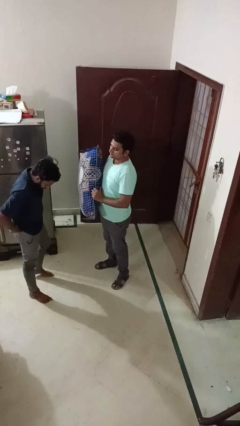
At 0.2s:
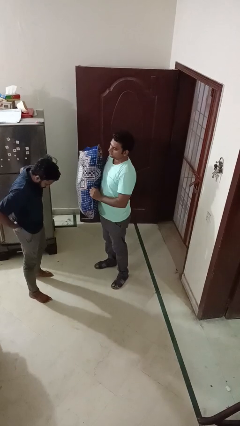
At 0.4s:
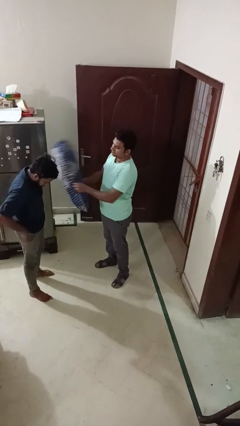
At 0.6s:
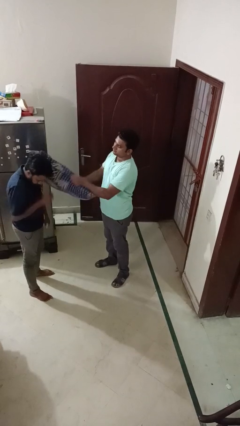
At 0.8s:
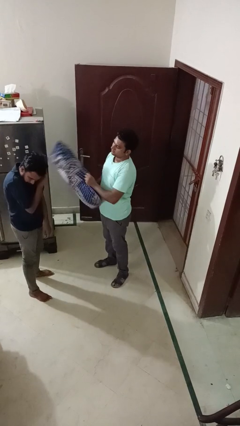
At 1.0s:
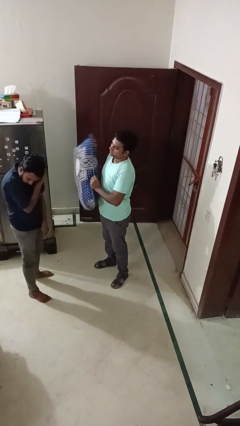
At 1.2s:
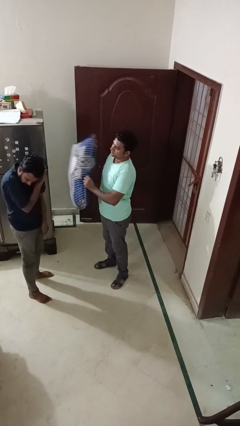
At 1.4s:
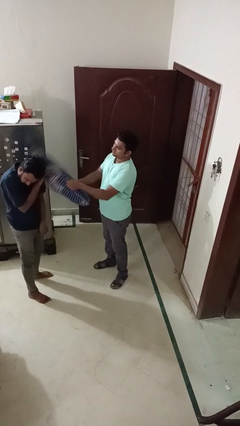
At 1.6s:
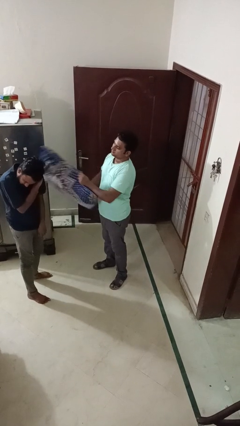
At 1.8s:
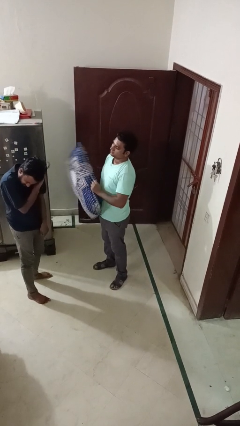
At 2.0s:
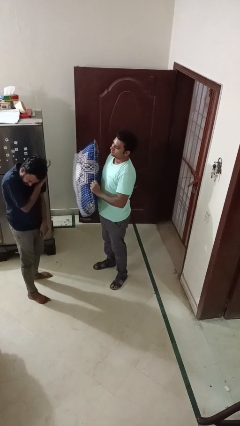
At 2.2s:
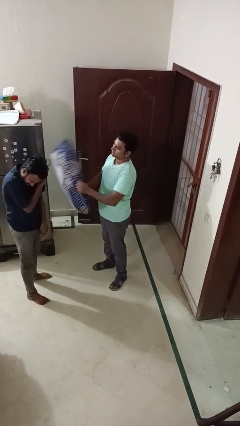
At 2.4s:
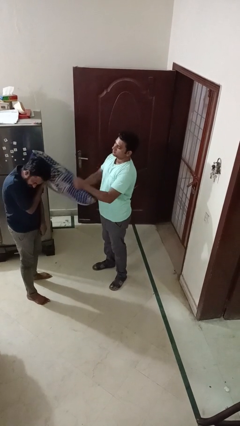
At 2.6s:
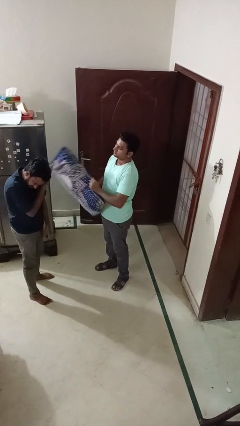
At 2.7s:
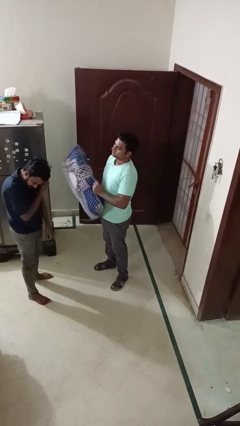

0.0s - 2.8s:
person hits person with pillow

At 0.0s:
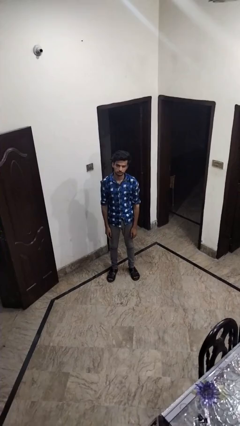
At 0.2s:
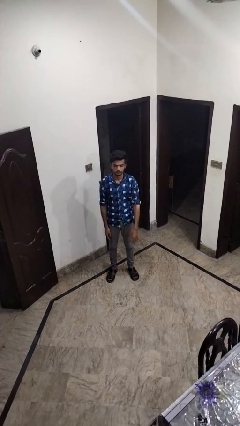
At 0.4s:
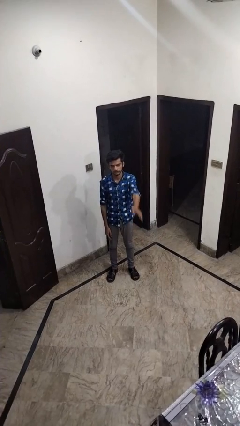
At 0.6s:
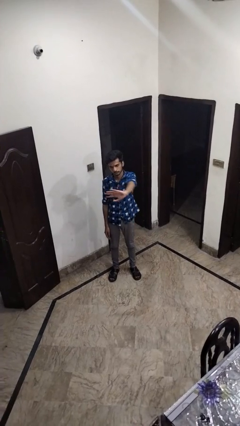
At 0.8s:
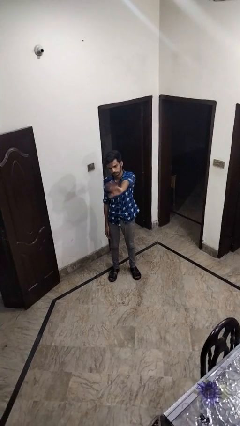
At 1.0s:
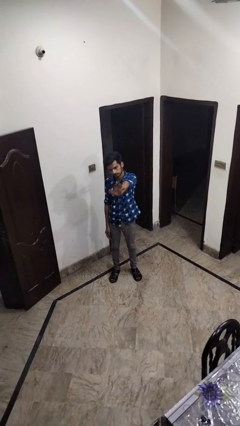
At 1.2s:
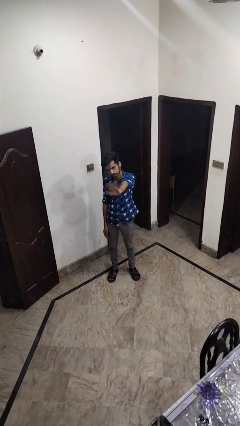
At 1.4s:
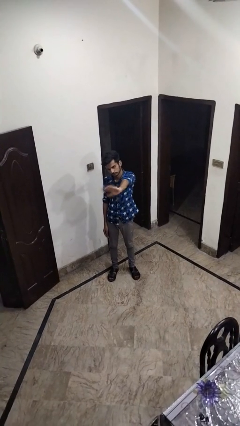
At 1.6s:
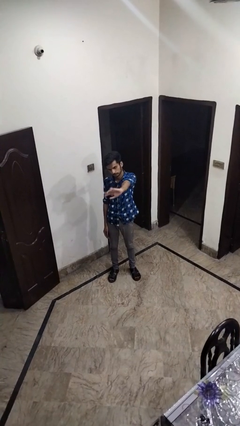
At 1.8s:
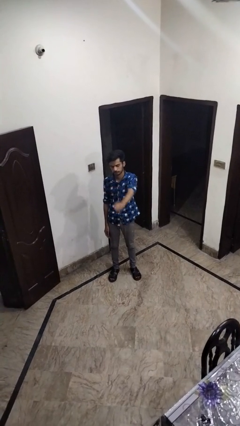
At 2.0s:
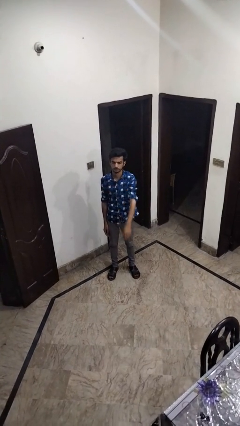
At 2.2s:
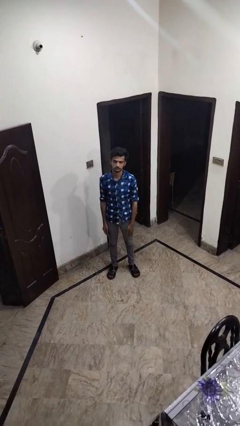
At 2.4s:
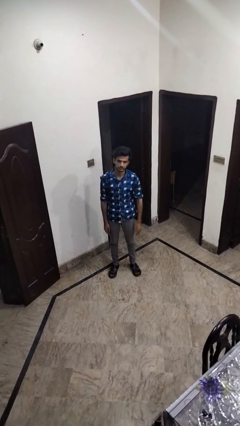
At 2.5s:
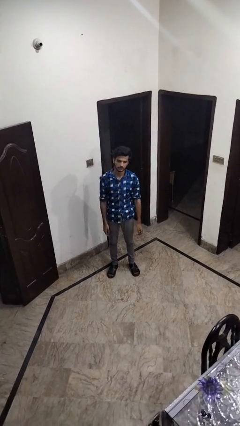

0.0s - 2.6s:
person waves at person

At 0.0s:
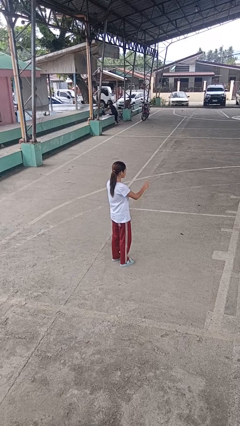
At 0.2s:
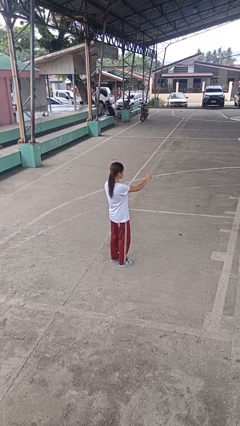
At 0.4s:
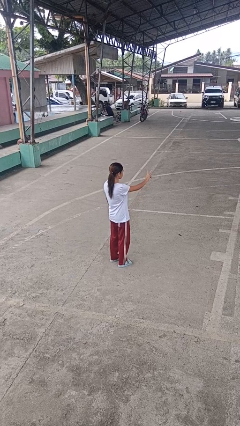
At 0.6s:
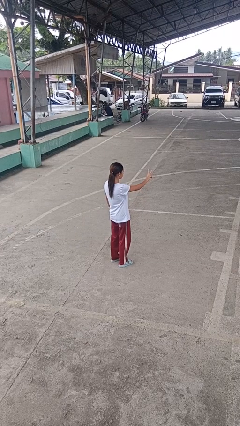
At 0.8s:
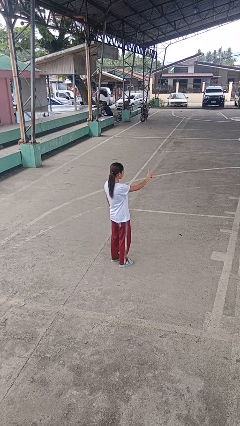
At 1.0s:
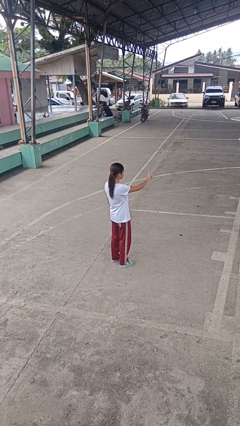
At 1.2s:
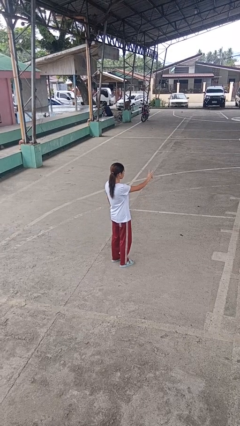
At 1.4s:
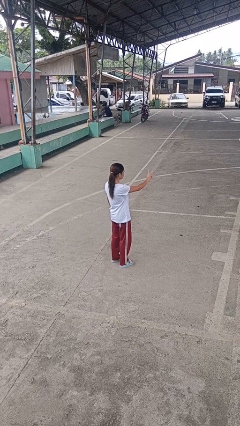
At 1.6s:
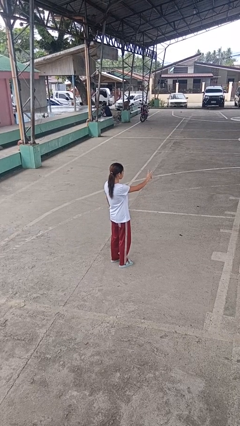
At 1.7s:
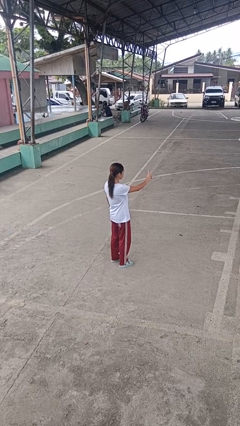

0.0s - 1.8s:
person gestures peace

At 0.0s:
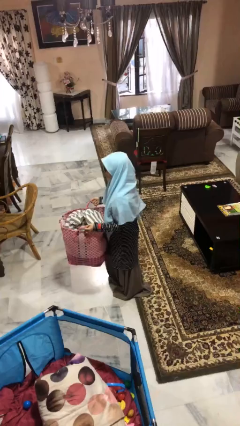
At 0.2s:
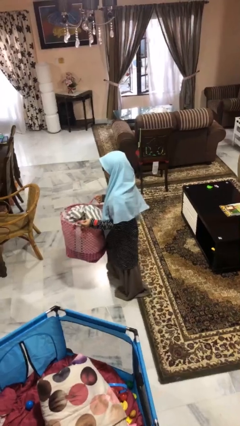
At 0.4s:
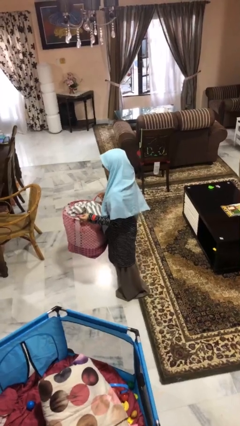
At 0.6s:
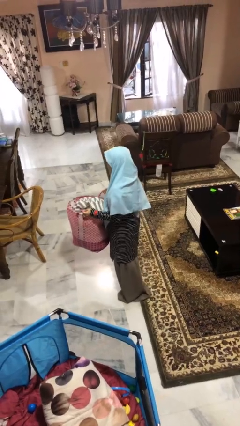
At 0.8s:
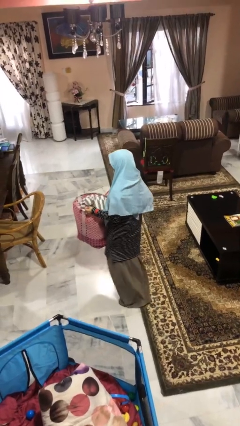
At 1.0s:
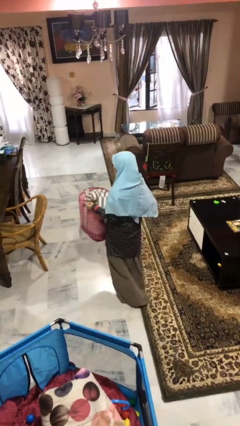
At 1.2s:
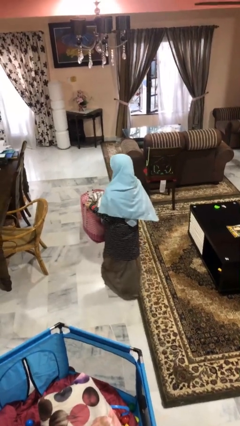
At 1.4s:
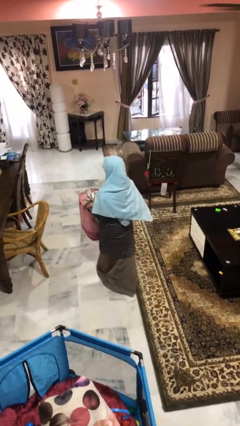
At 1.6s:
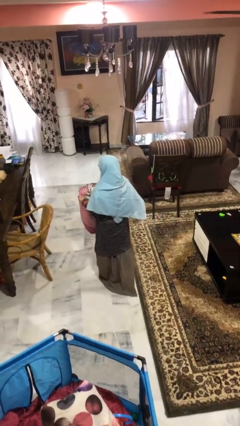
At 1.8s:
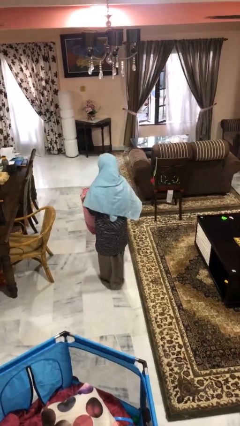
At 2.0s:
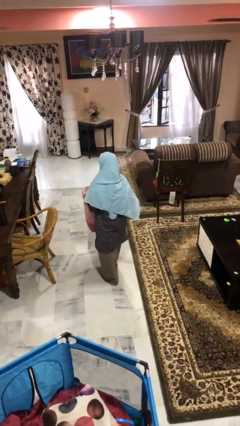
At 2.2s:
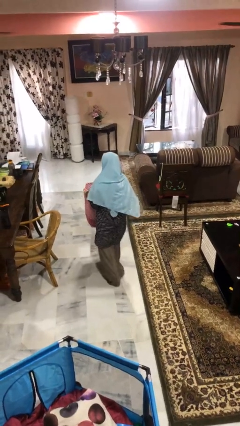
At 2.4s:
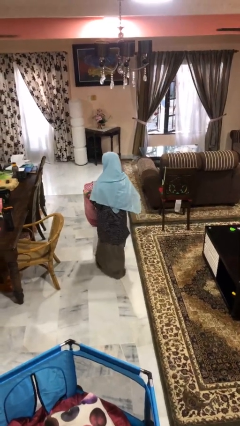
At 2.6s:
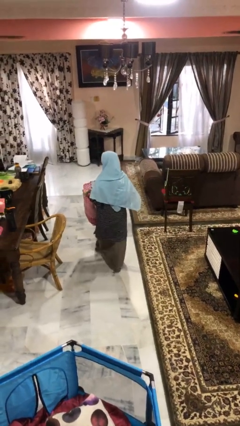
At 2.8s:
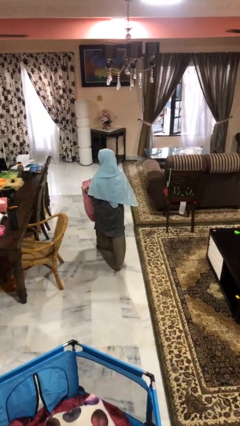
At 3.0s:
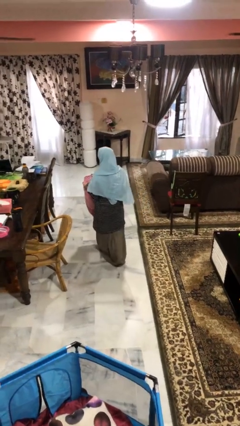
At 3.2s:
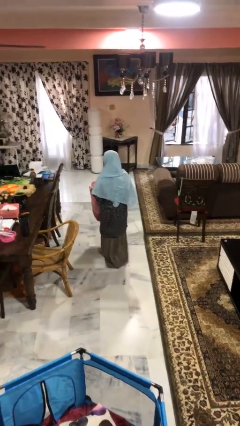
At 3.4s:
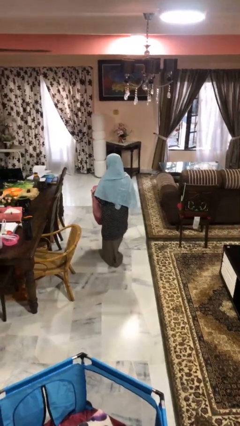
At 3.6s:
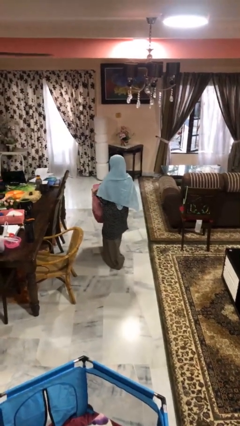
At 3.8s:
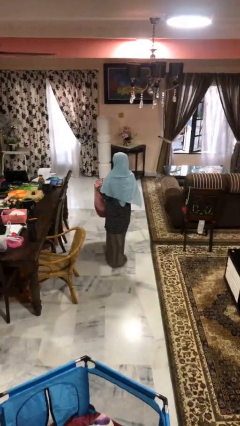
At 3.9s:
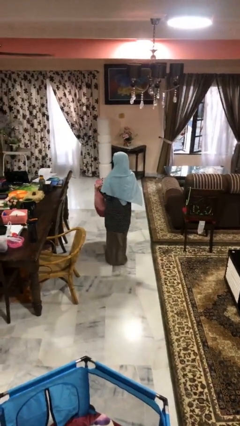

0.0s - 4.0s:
person carries laundry basket

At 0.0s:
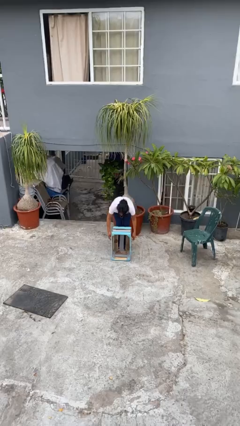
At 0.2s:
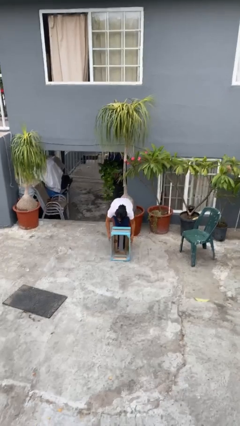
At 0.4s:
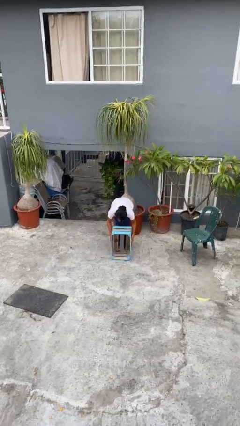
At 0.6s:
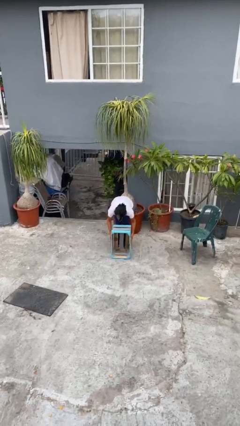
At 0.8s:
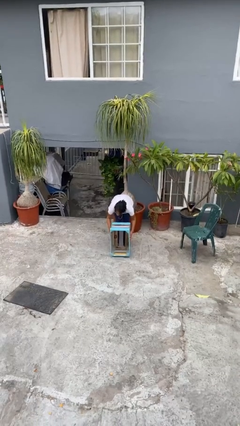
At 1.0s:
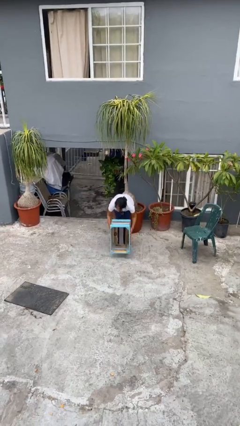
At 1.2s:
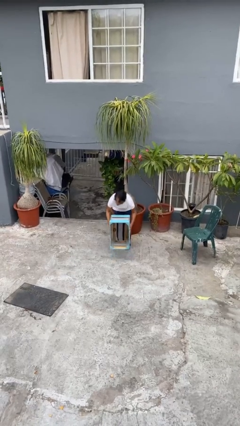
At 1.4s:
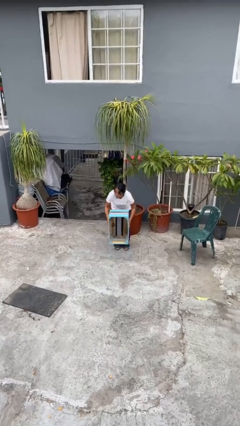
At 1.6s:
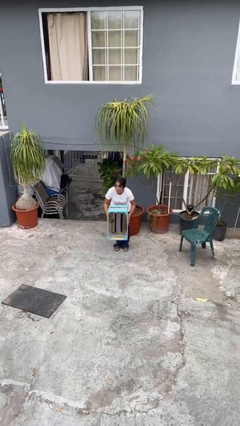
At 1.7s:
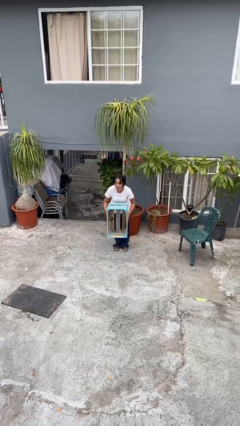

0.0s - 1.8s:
person picks up object from floor

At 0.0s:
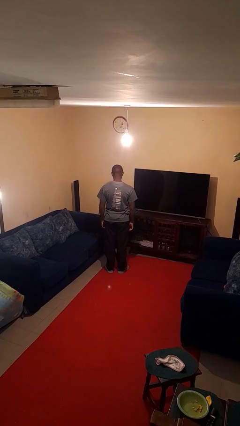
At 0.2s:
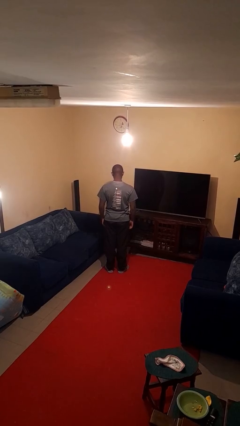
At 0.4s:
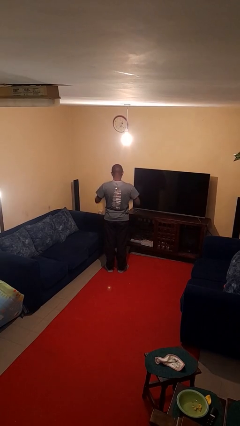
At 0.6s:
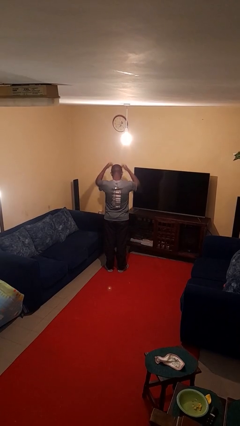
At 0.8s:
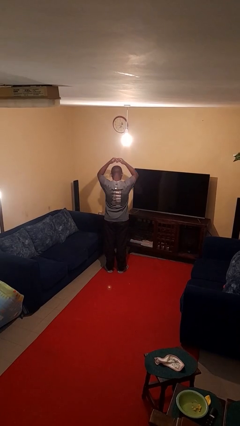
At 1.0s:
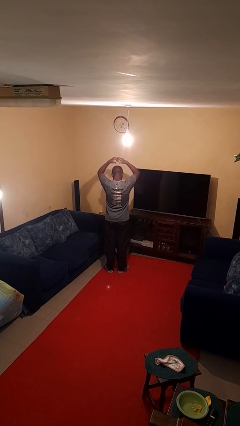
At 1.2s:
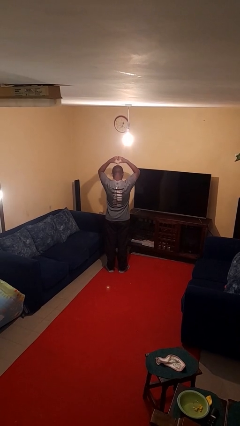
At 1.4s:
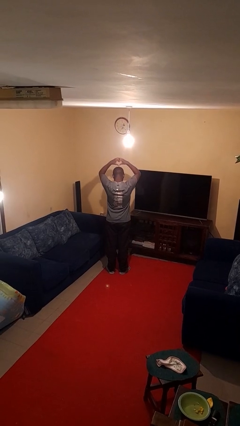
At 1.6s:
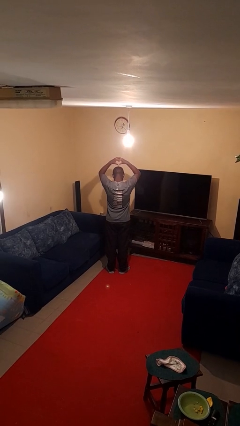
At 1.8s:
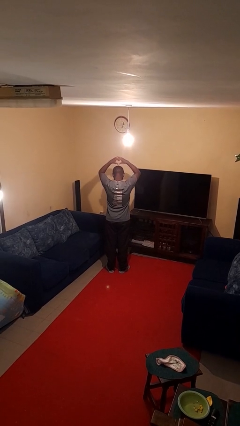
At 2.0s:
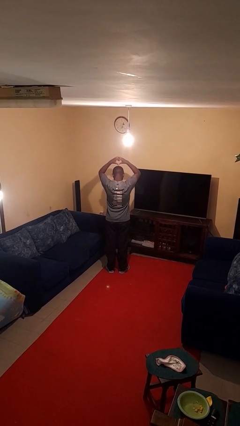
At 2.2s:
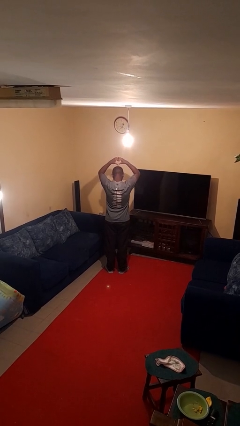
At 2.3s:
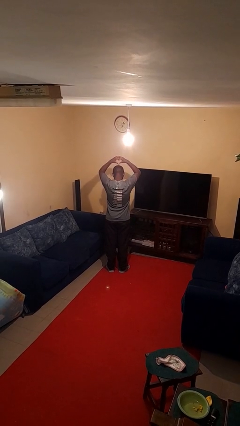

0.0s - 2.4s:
person gestures heart

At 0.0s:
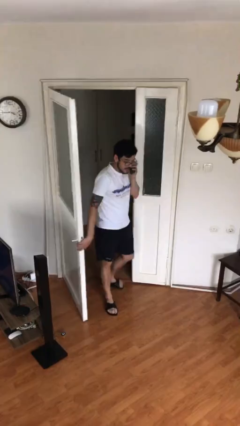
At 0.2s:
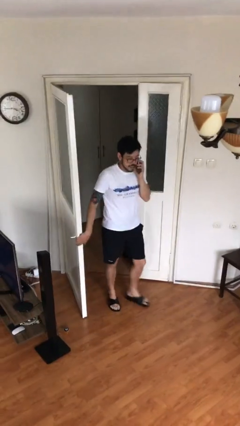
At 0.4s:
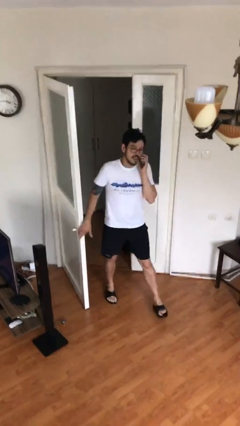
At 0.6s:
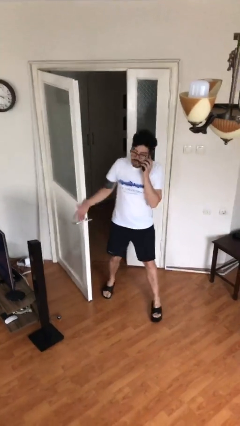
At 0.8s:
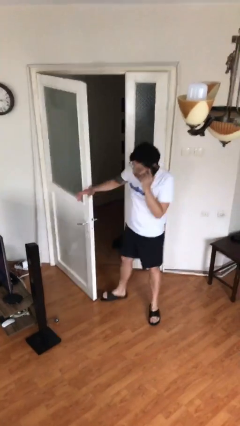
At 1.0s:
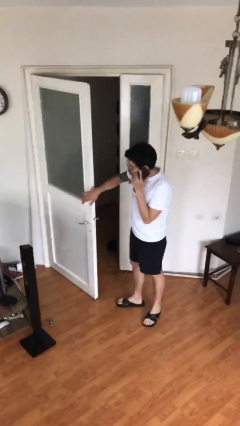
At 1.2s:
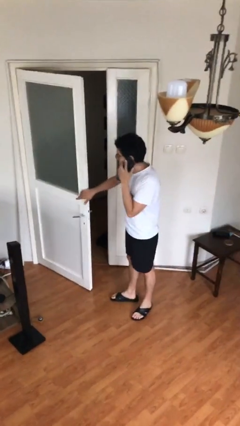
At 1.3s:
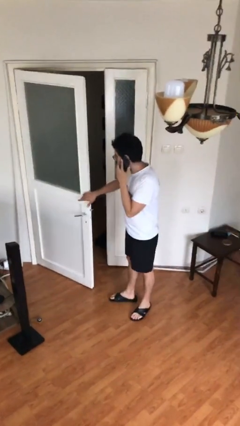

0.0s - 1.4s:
person enters scene through structure
